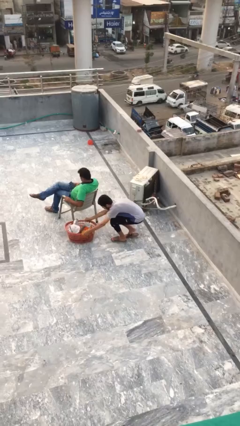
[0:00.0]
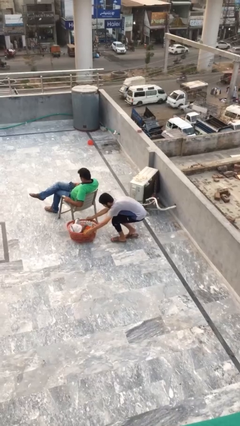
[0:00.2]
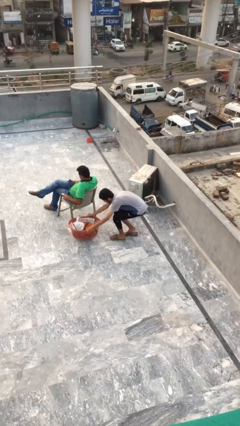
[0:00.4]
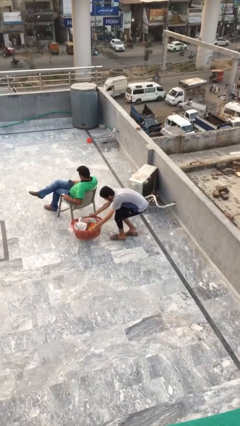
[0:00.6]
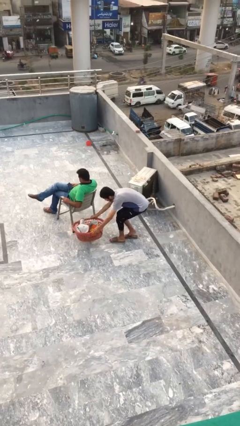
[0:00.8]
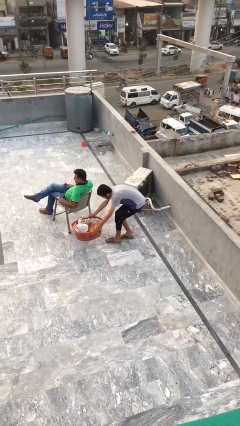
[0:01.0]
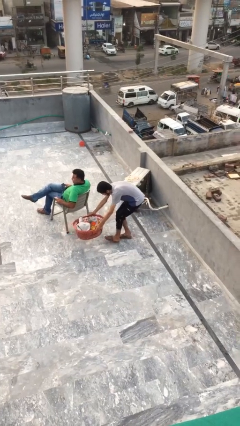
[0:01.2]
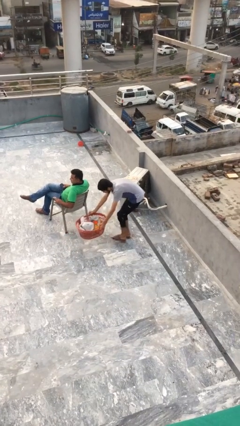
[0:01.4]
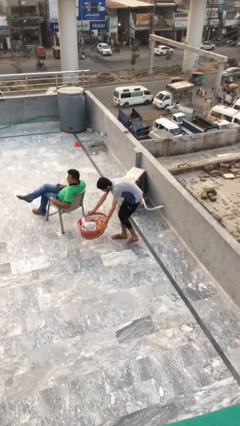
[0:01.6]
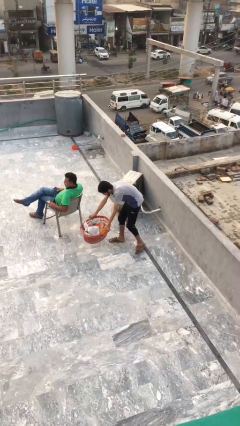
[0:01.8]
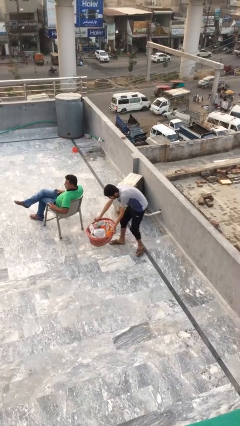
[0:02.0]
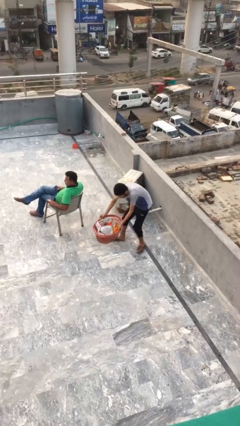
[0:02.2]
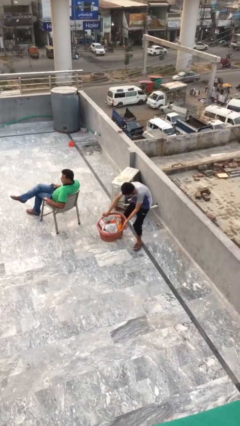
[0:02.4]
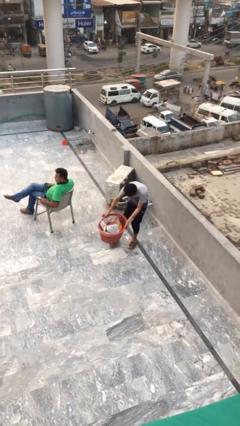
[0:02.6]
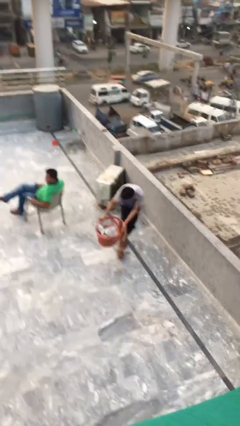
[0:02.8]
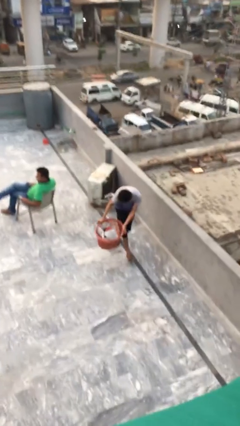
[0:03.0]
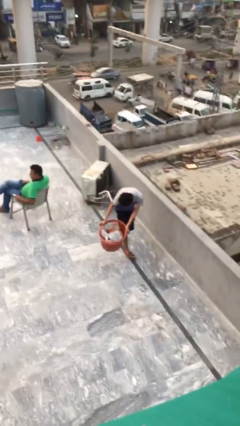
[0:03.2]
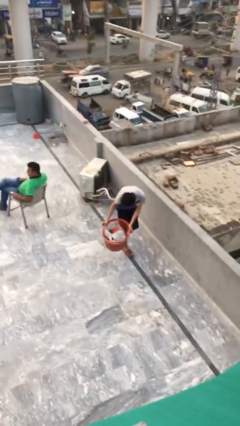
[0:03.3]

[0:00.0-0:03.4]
person steals object from person

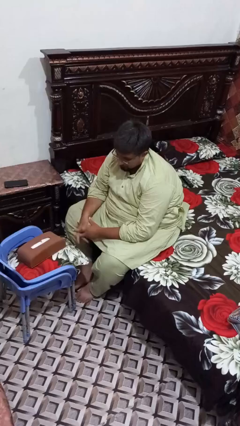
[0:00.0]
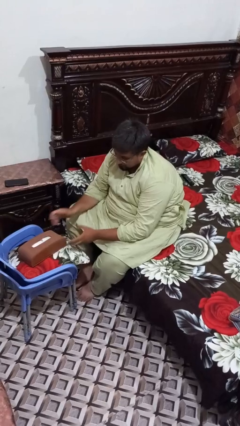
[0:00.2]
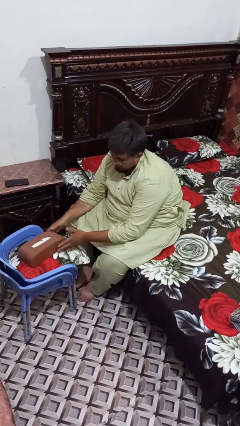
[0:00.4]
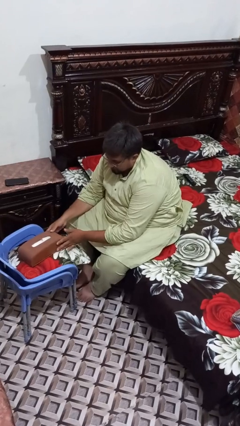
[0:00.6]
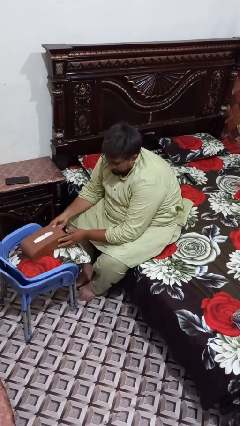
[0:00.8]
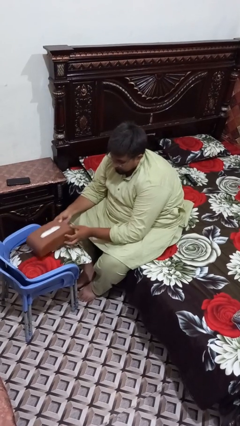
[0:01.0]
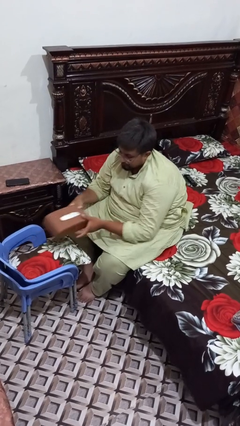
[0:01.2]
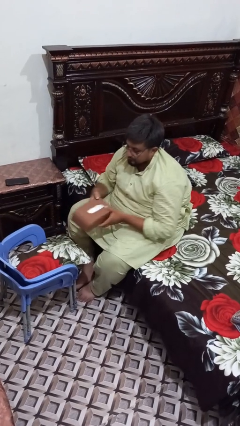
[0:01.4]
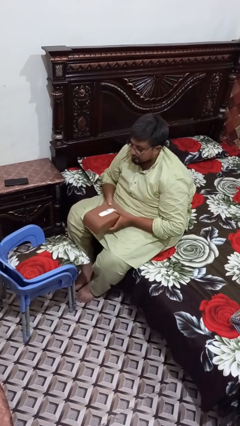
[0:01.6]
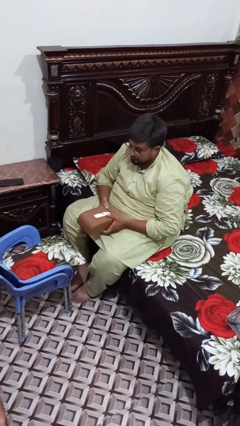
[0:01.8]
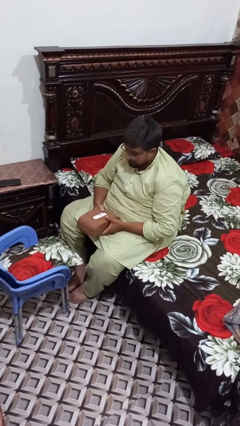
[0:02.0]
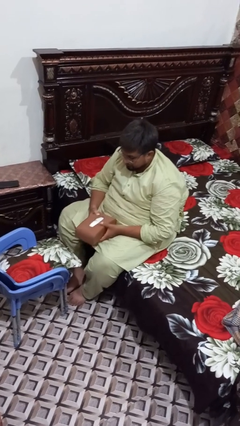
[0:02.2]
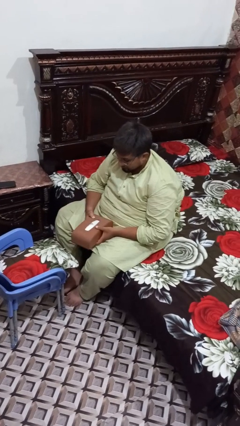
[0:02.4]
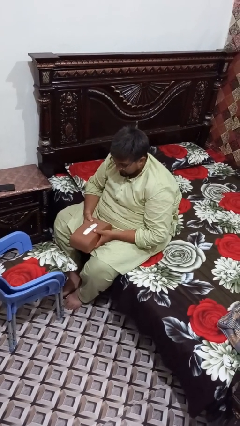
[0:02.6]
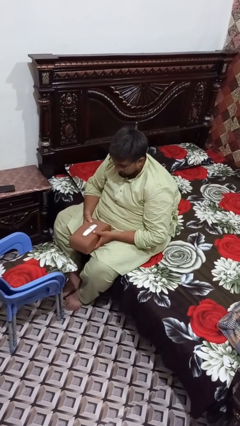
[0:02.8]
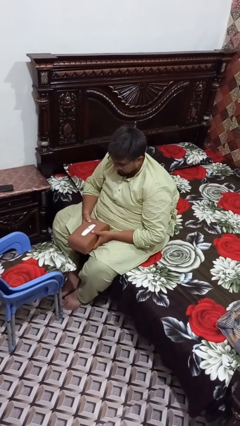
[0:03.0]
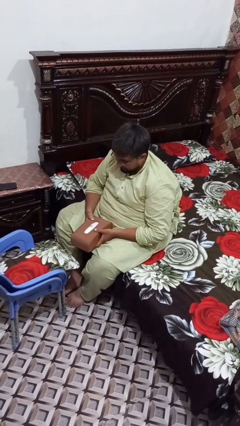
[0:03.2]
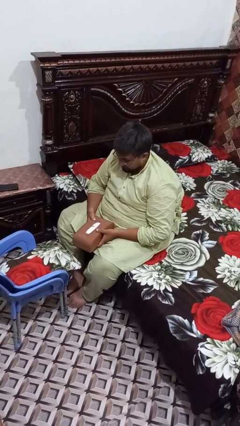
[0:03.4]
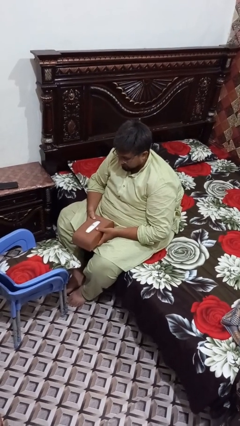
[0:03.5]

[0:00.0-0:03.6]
person picks up object from couch

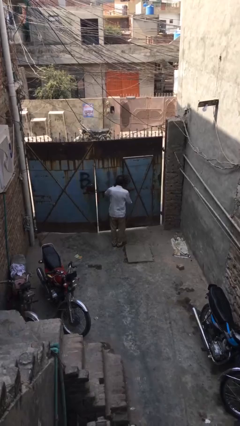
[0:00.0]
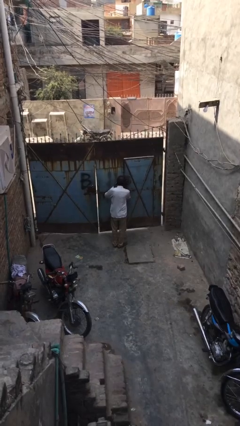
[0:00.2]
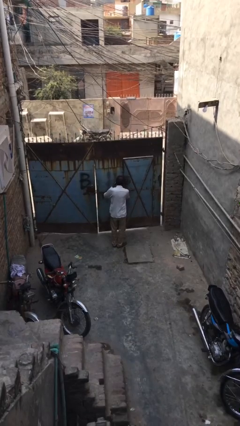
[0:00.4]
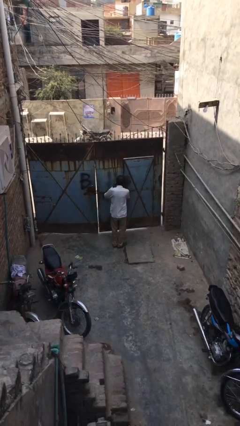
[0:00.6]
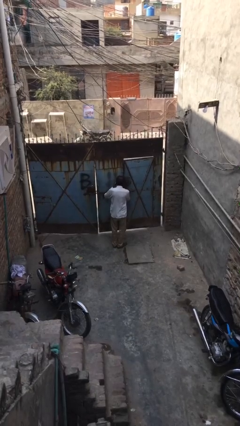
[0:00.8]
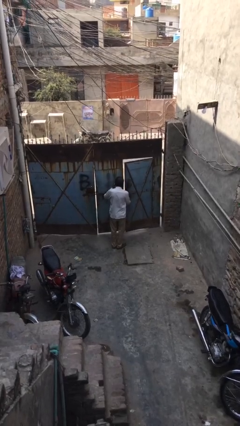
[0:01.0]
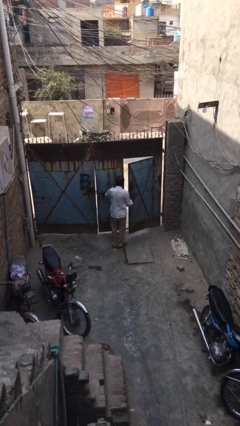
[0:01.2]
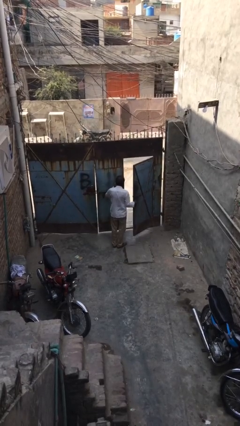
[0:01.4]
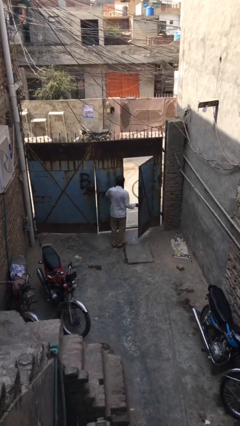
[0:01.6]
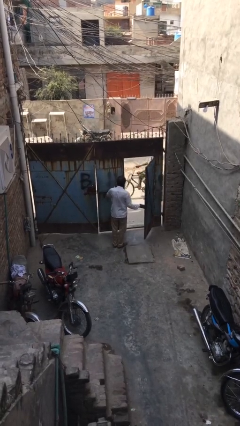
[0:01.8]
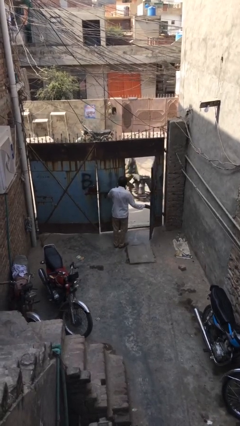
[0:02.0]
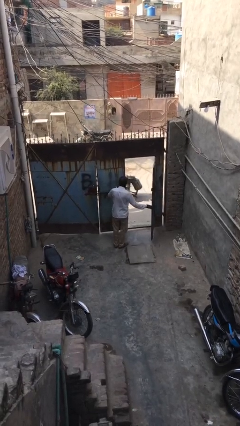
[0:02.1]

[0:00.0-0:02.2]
person opens facility door

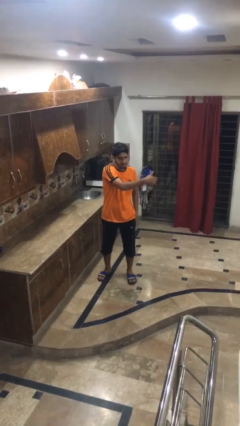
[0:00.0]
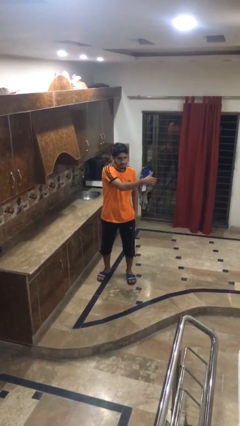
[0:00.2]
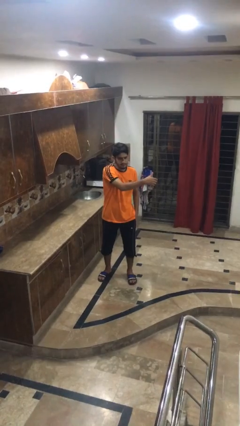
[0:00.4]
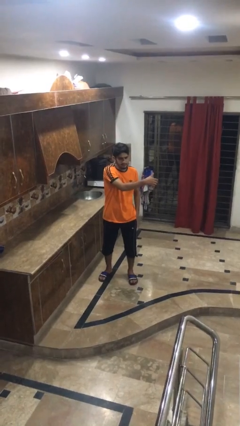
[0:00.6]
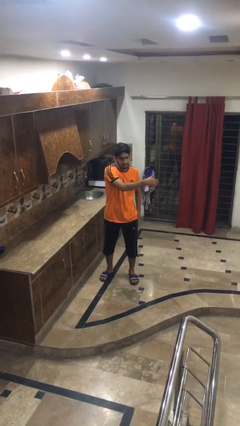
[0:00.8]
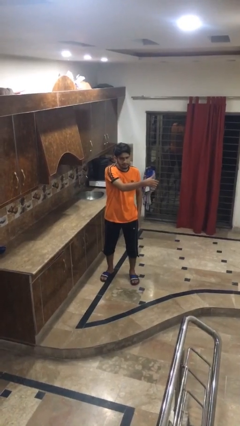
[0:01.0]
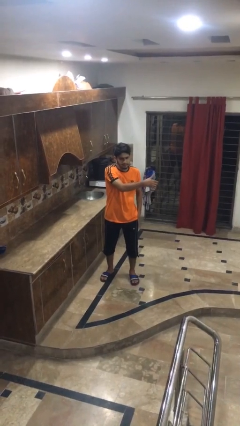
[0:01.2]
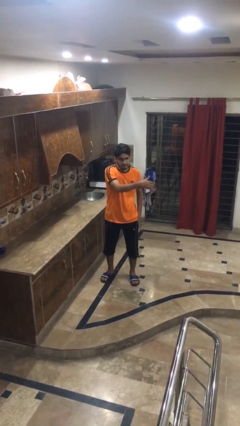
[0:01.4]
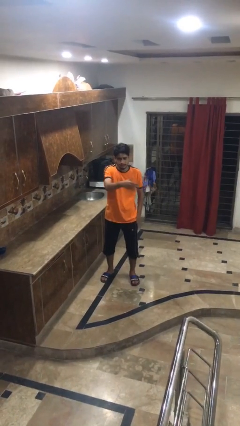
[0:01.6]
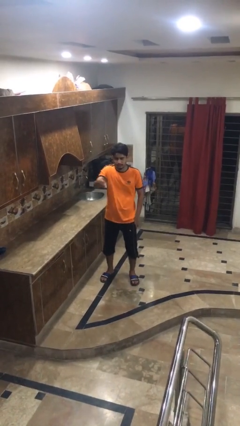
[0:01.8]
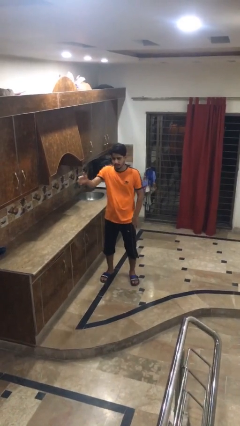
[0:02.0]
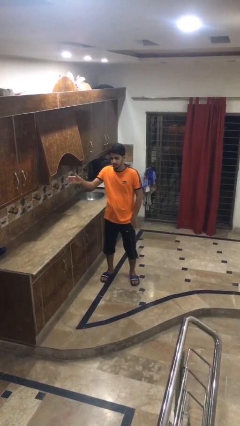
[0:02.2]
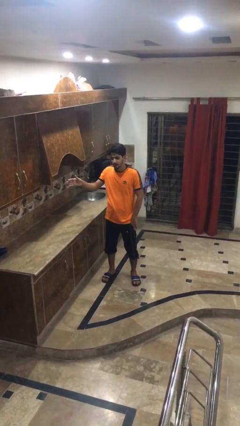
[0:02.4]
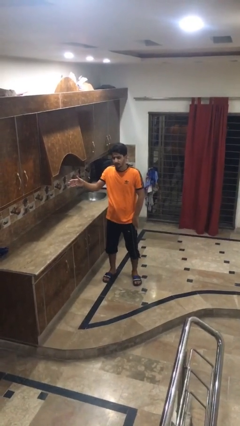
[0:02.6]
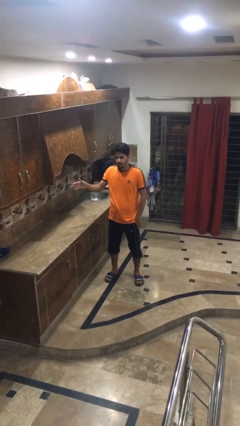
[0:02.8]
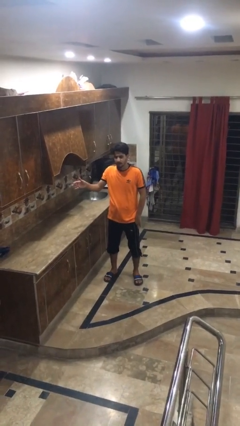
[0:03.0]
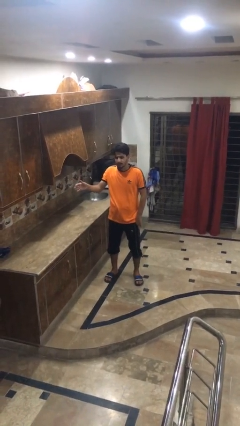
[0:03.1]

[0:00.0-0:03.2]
person gestures swipe right

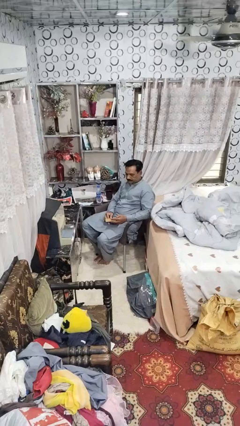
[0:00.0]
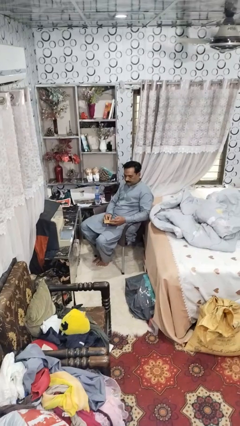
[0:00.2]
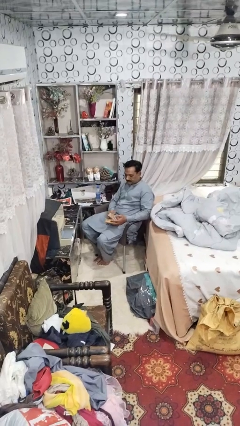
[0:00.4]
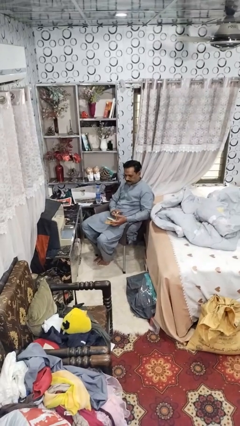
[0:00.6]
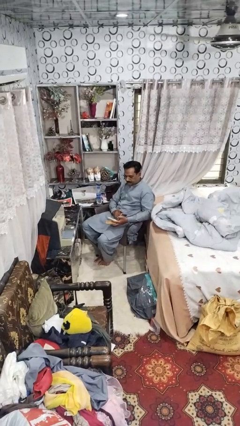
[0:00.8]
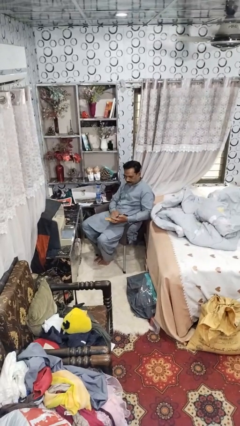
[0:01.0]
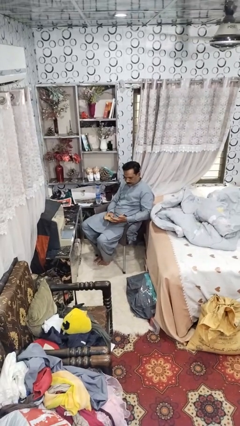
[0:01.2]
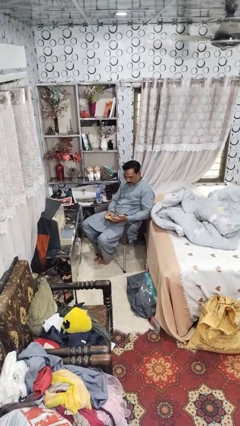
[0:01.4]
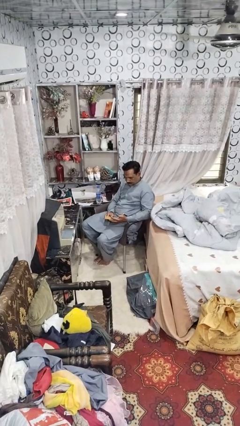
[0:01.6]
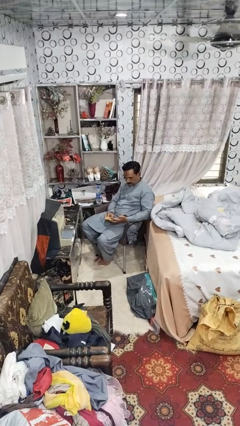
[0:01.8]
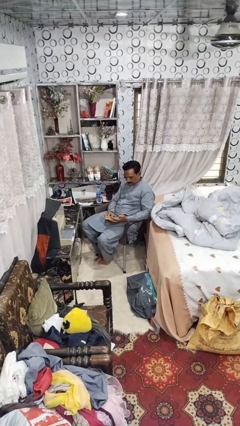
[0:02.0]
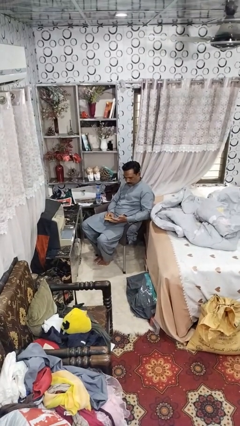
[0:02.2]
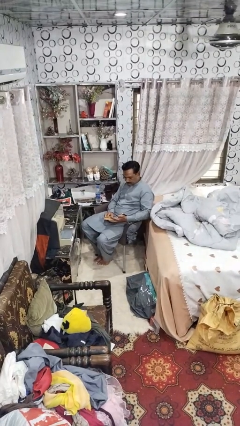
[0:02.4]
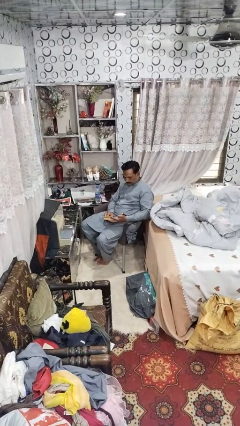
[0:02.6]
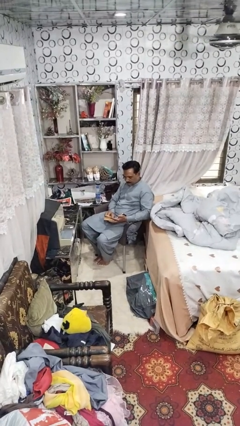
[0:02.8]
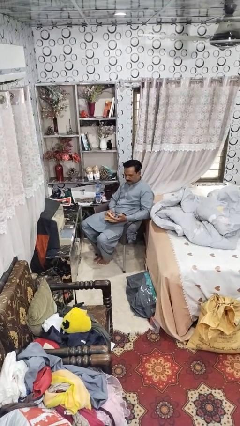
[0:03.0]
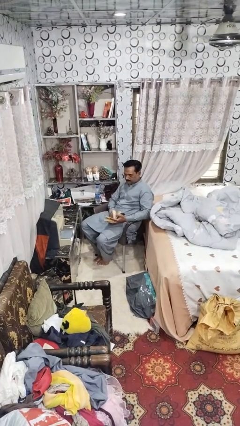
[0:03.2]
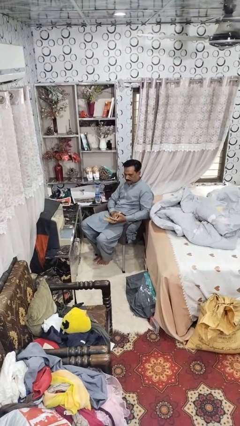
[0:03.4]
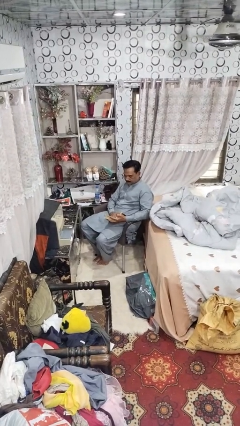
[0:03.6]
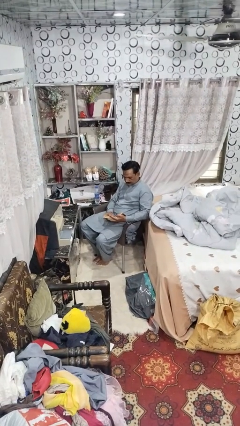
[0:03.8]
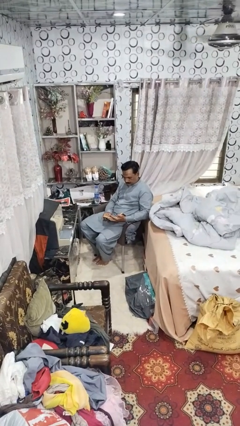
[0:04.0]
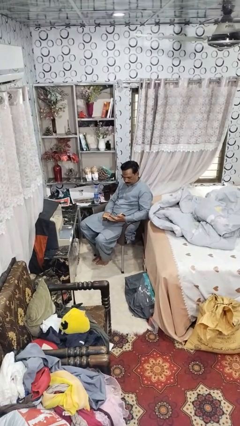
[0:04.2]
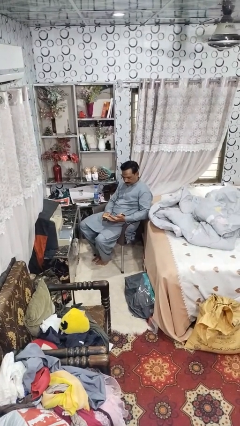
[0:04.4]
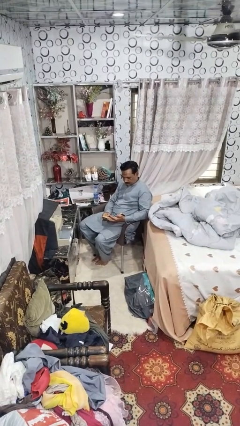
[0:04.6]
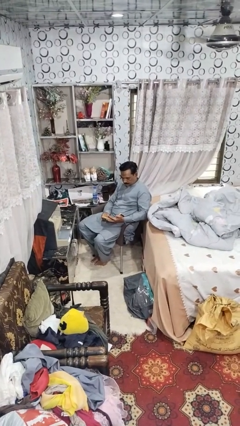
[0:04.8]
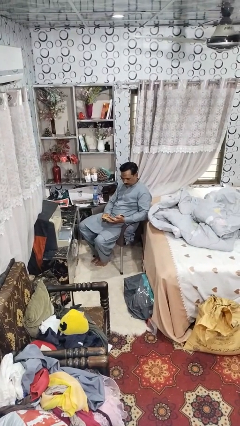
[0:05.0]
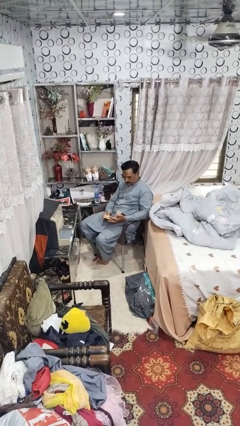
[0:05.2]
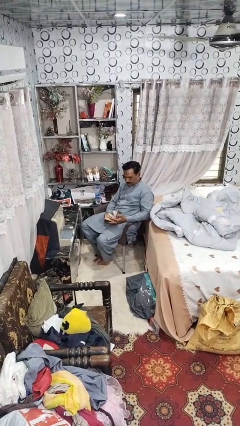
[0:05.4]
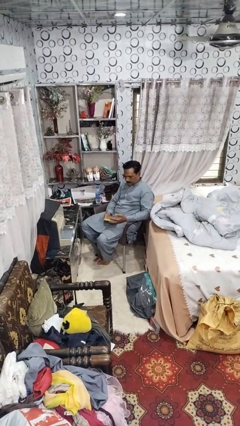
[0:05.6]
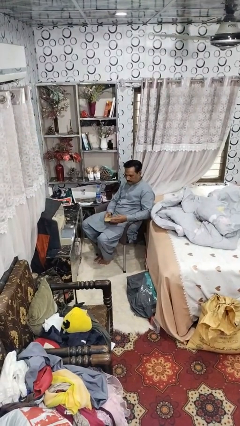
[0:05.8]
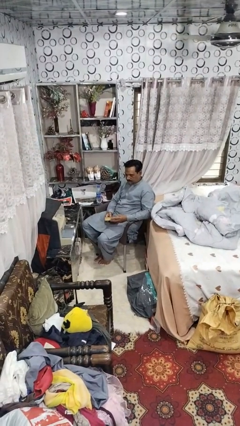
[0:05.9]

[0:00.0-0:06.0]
person reads book
